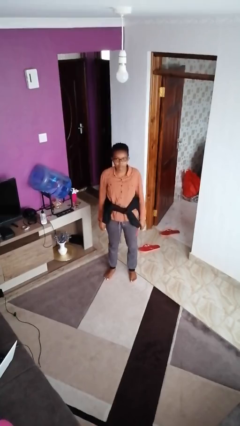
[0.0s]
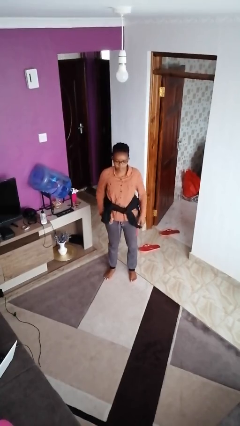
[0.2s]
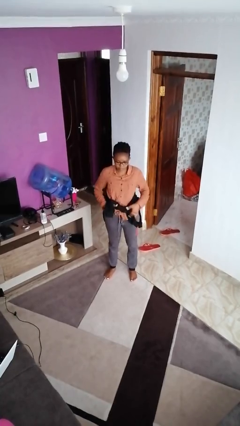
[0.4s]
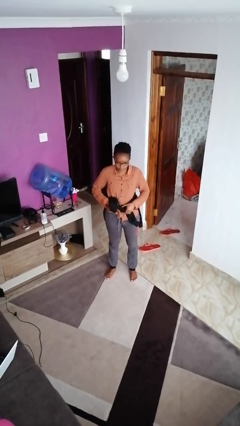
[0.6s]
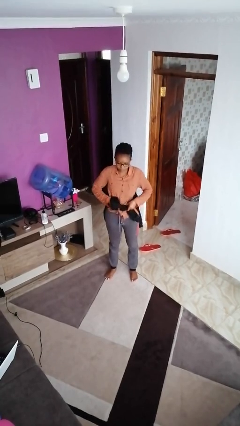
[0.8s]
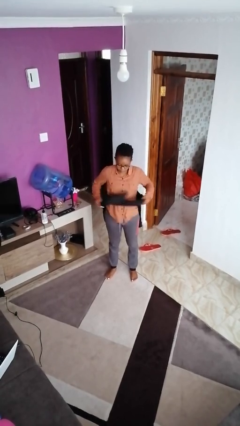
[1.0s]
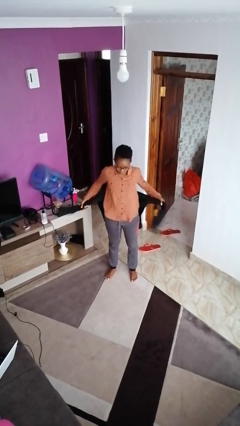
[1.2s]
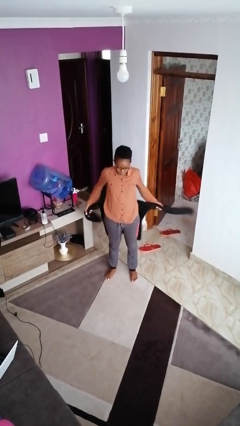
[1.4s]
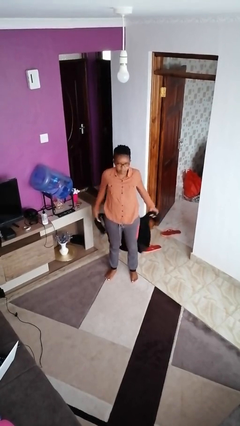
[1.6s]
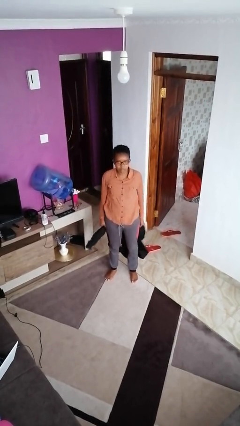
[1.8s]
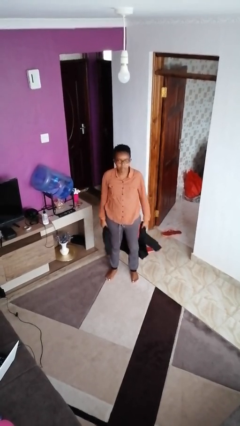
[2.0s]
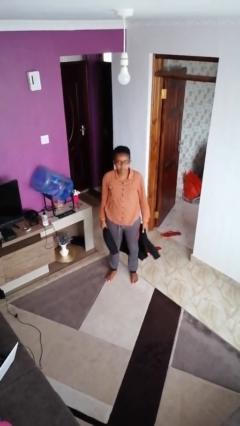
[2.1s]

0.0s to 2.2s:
person unties jacket around waist

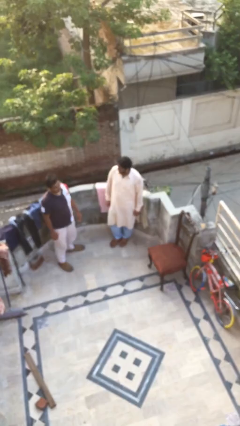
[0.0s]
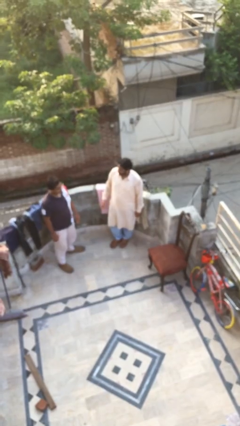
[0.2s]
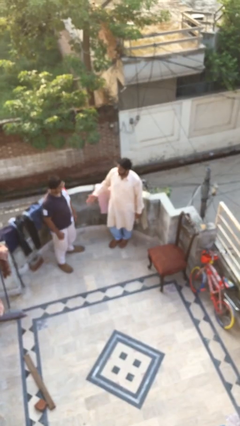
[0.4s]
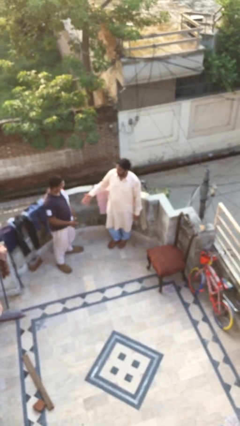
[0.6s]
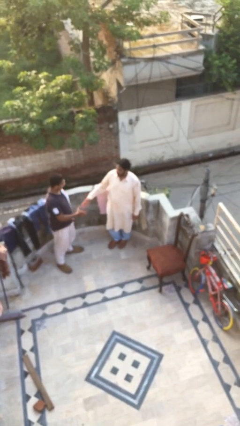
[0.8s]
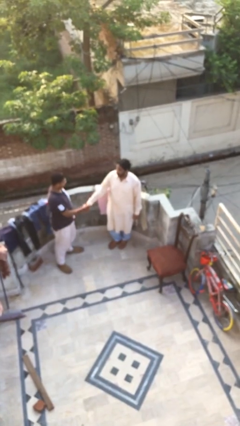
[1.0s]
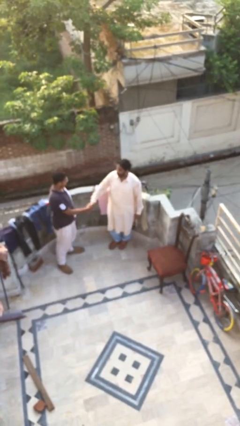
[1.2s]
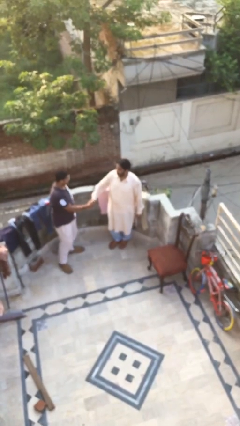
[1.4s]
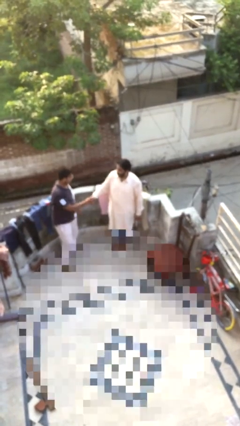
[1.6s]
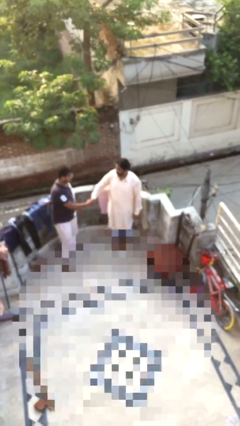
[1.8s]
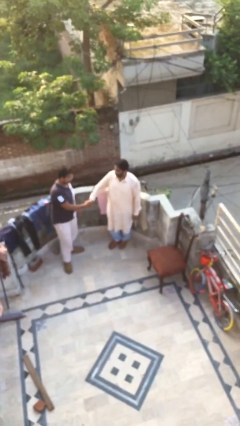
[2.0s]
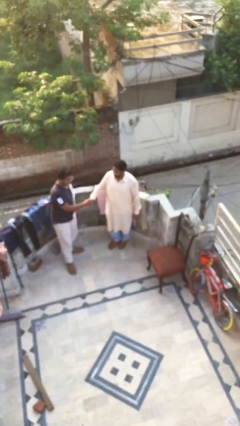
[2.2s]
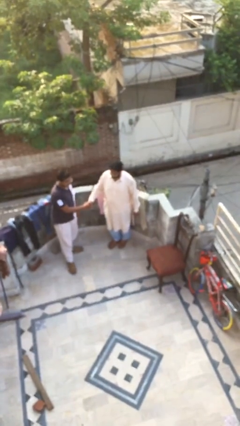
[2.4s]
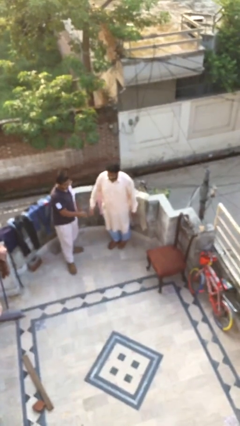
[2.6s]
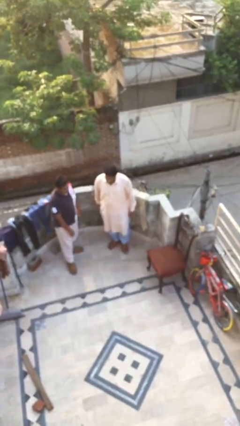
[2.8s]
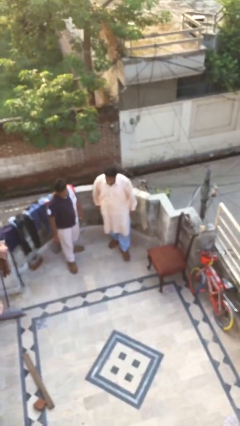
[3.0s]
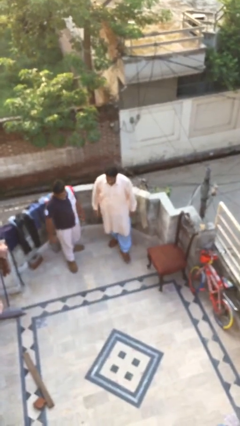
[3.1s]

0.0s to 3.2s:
person shakes hand

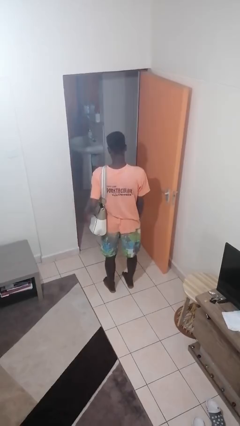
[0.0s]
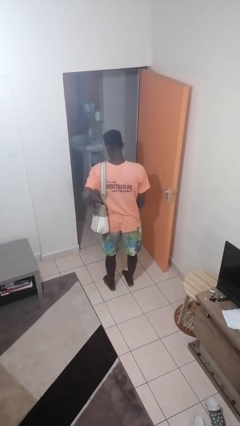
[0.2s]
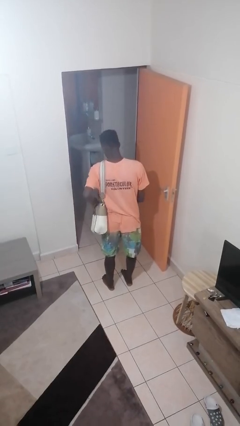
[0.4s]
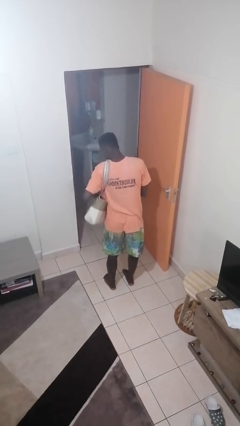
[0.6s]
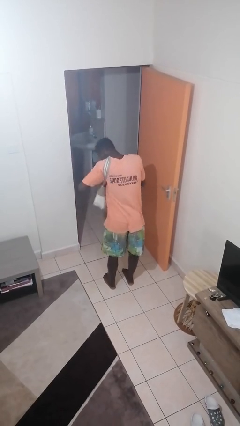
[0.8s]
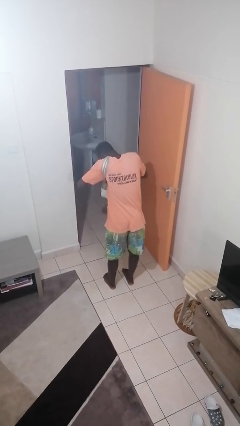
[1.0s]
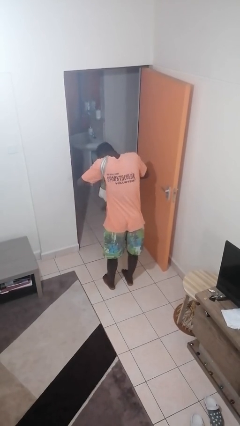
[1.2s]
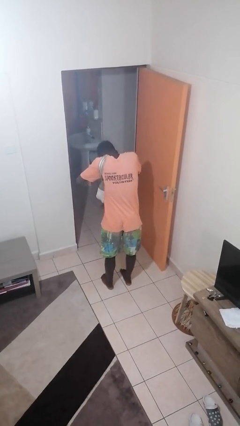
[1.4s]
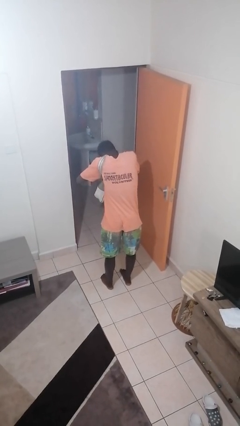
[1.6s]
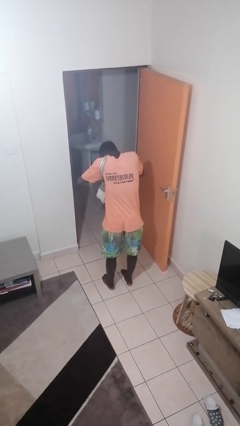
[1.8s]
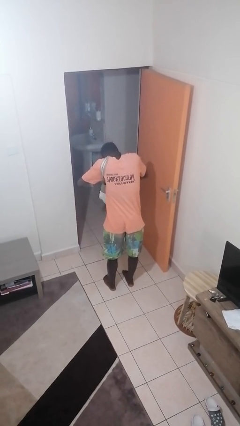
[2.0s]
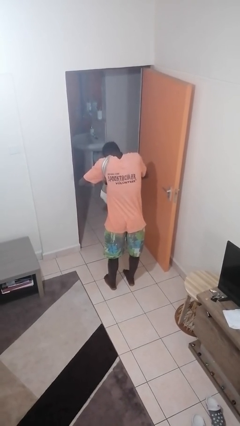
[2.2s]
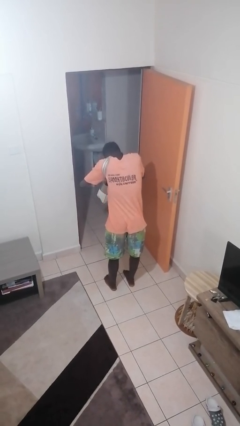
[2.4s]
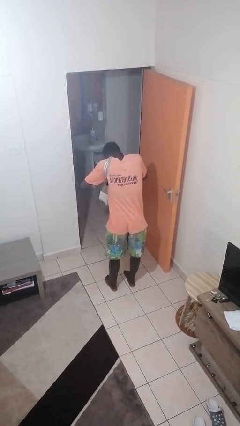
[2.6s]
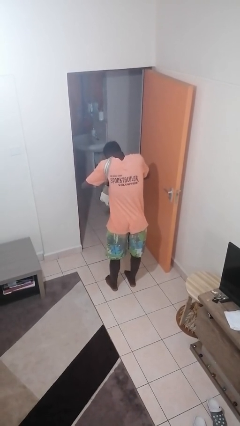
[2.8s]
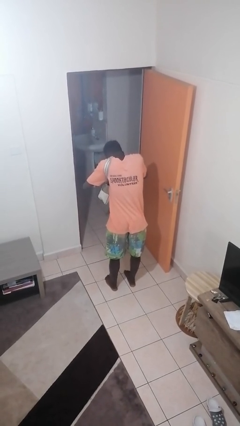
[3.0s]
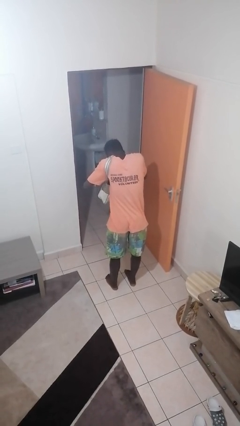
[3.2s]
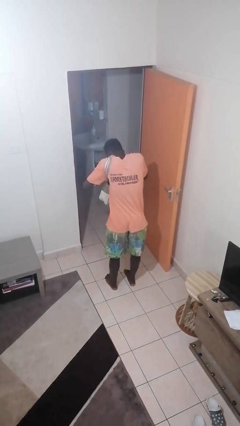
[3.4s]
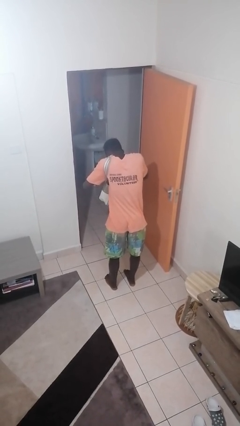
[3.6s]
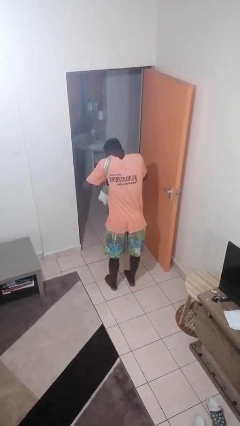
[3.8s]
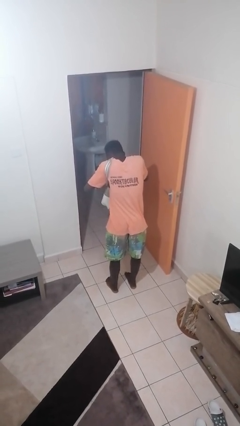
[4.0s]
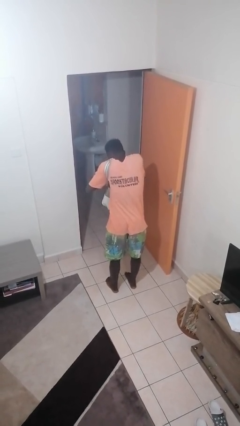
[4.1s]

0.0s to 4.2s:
person searches in purse

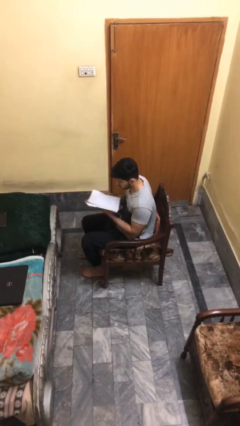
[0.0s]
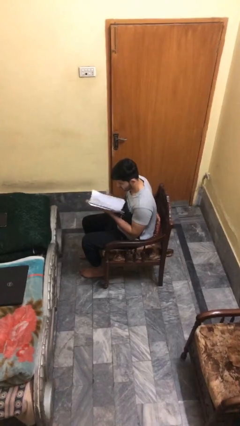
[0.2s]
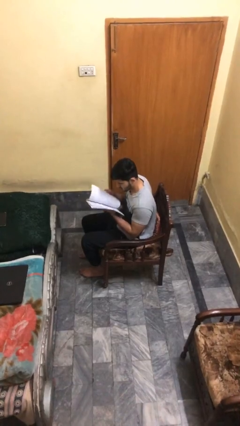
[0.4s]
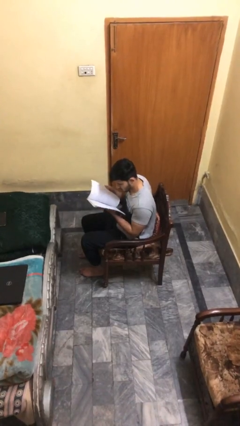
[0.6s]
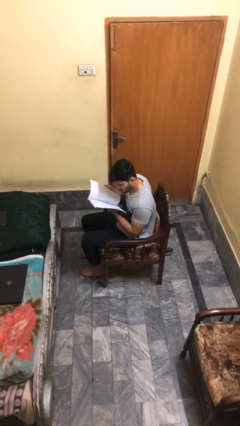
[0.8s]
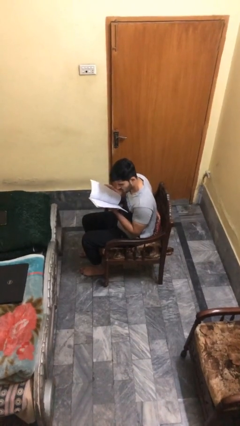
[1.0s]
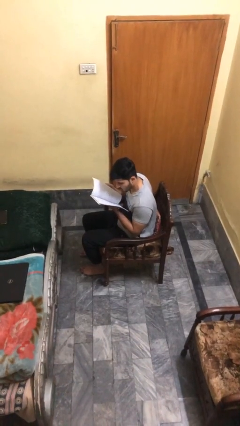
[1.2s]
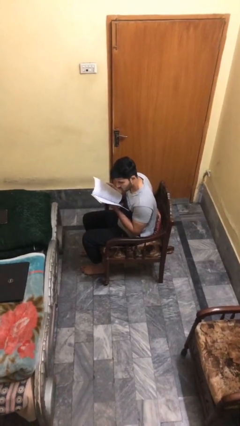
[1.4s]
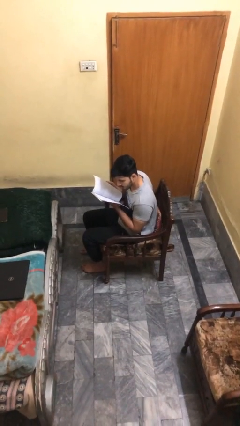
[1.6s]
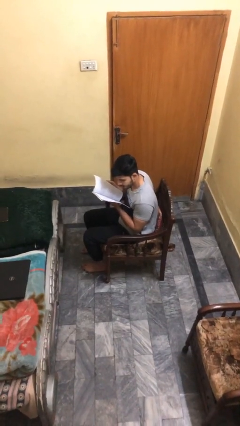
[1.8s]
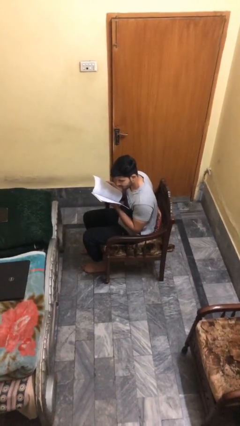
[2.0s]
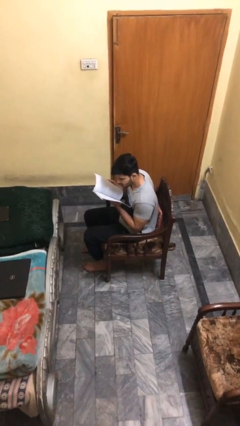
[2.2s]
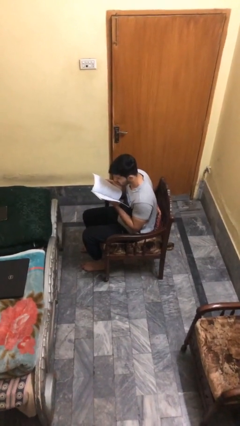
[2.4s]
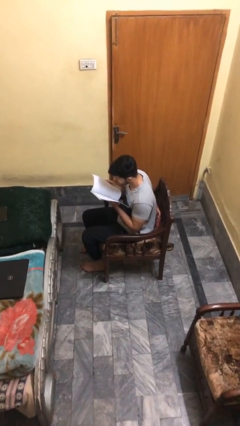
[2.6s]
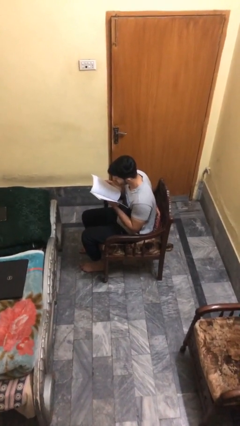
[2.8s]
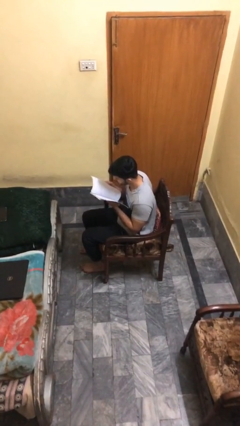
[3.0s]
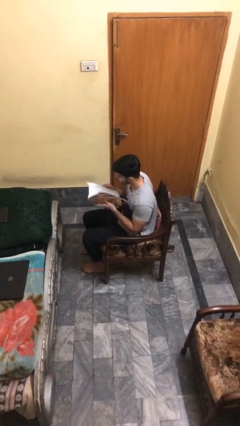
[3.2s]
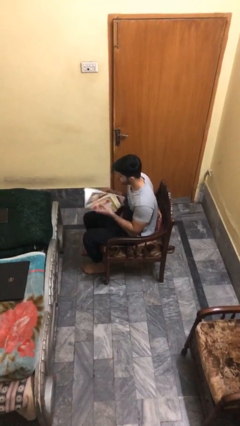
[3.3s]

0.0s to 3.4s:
person reads document

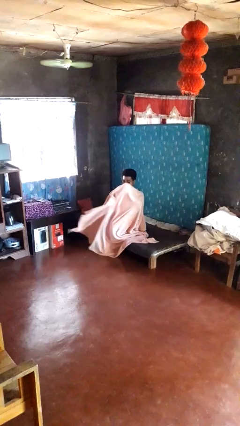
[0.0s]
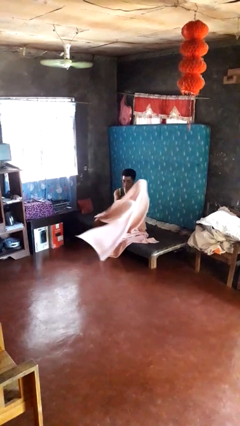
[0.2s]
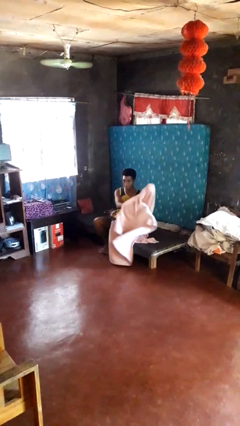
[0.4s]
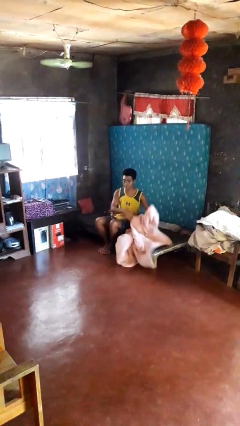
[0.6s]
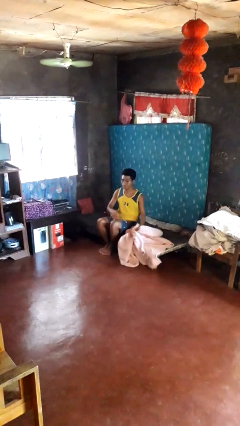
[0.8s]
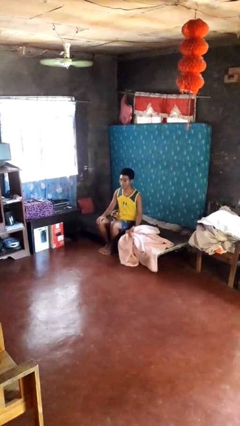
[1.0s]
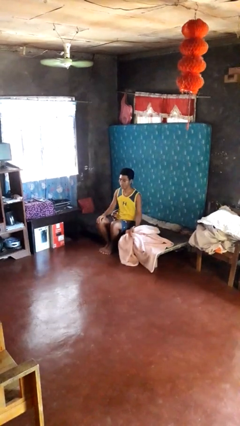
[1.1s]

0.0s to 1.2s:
person uncovers with blanket

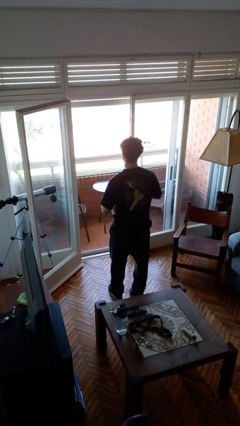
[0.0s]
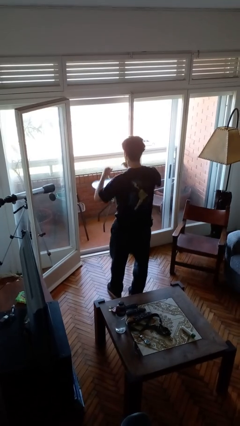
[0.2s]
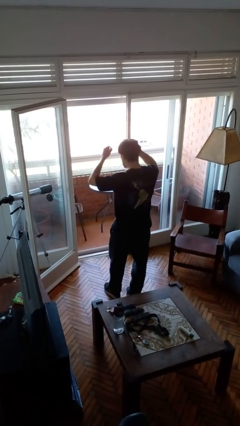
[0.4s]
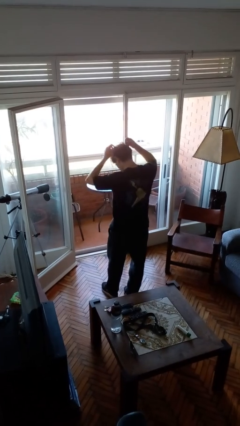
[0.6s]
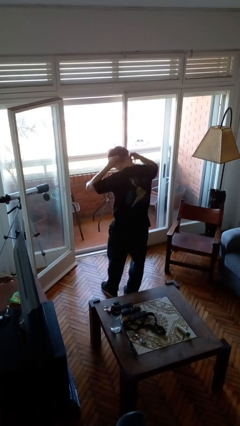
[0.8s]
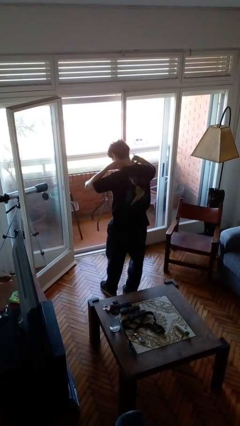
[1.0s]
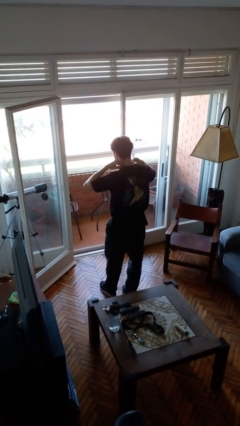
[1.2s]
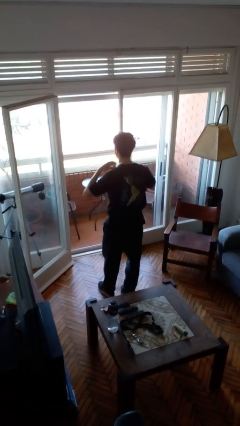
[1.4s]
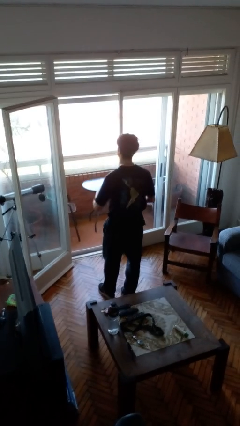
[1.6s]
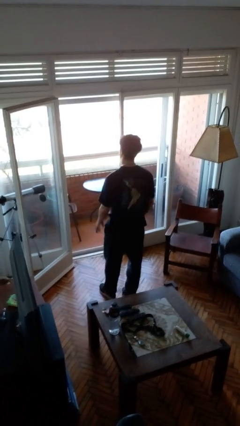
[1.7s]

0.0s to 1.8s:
person puts on necklace

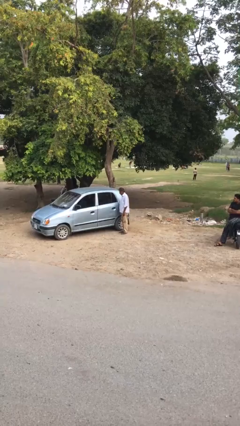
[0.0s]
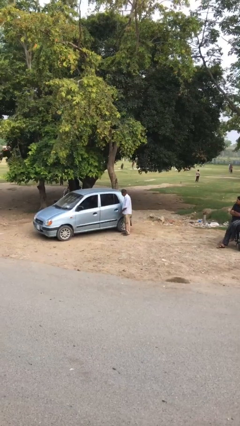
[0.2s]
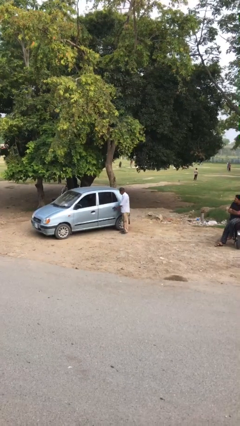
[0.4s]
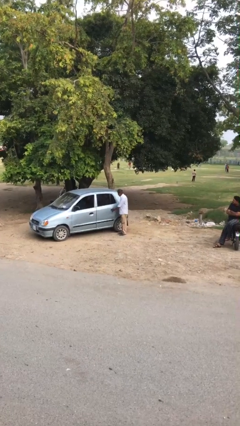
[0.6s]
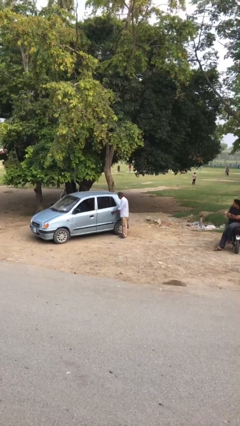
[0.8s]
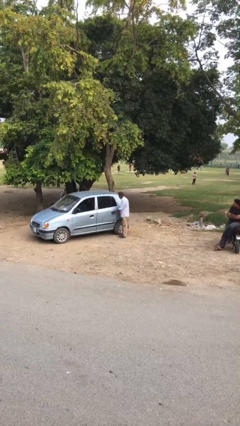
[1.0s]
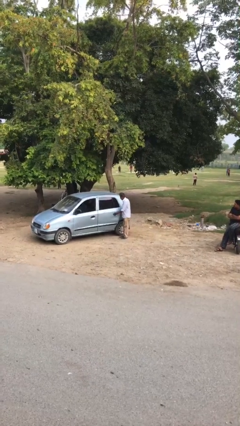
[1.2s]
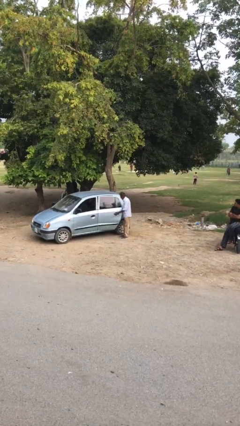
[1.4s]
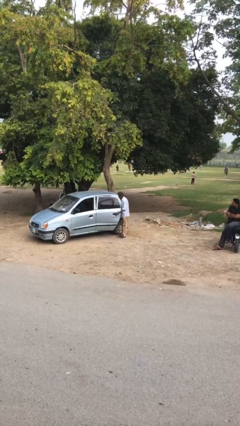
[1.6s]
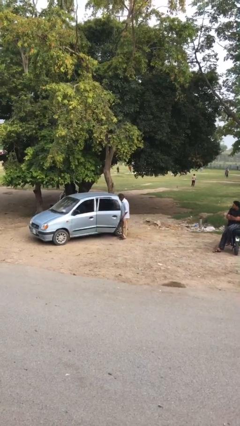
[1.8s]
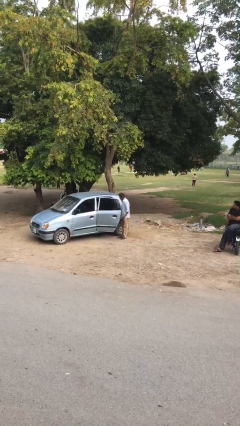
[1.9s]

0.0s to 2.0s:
person opens car door
